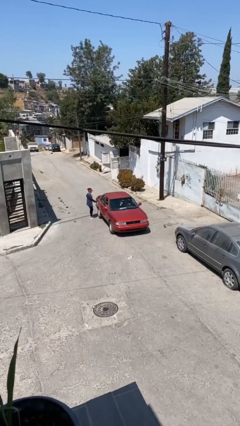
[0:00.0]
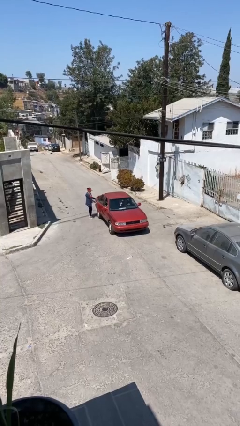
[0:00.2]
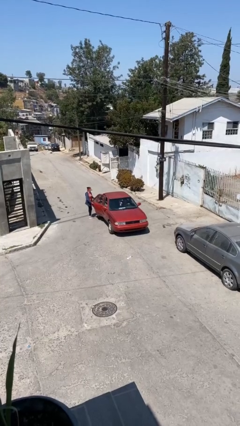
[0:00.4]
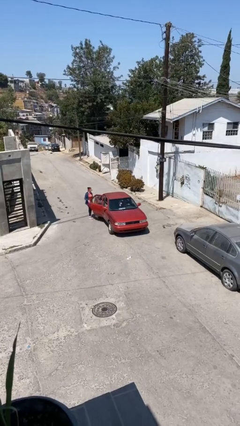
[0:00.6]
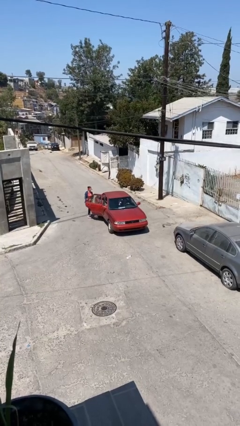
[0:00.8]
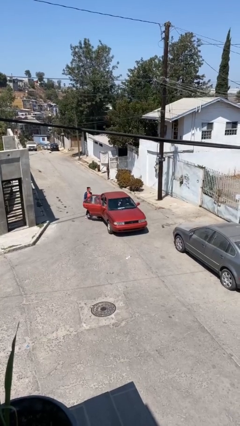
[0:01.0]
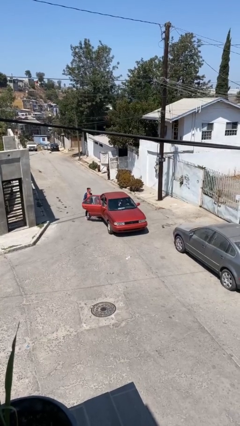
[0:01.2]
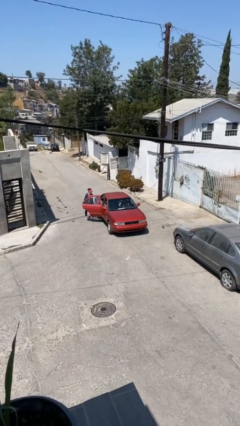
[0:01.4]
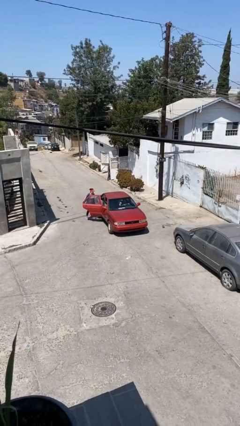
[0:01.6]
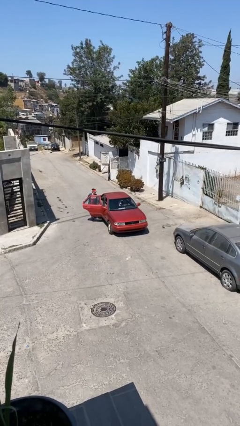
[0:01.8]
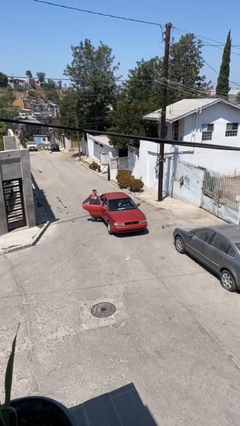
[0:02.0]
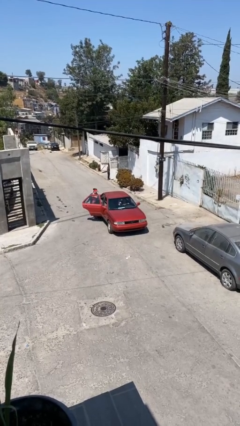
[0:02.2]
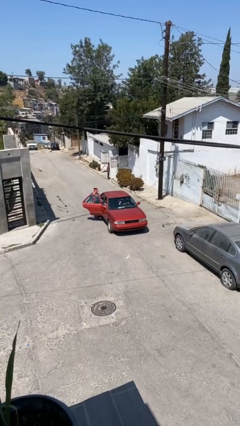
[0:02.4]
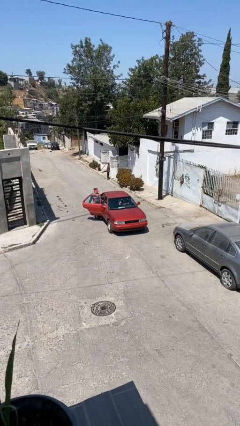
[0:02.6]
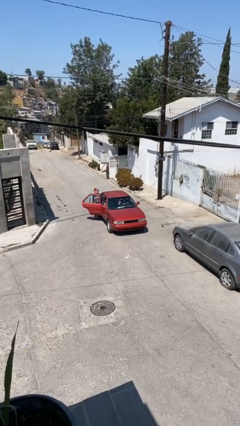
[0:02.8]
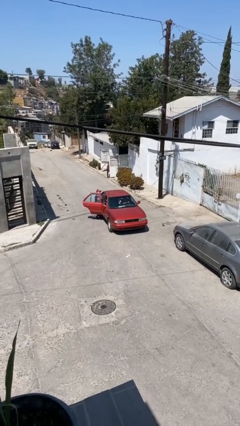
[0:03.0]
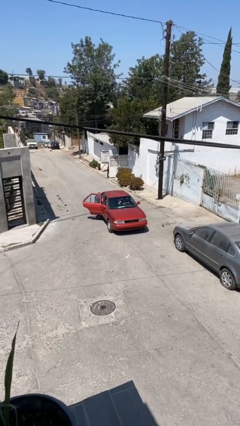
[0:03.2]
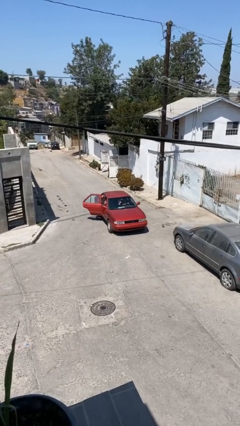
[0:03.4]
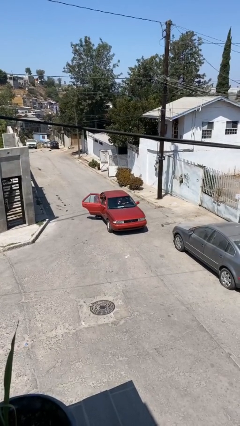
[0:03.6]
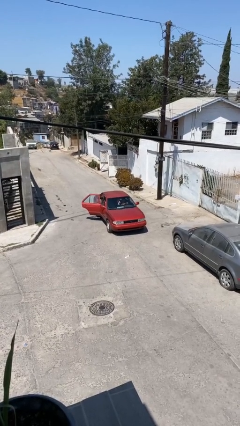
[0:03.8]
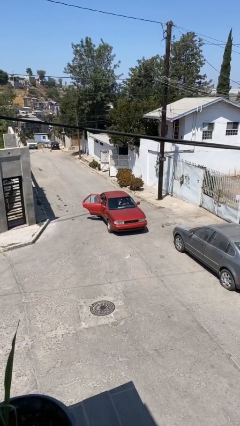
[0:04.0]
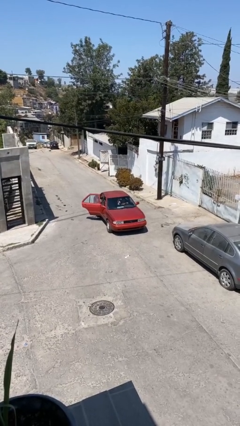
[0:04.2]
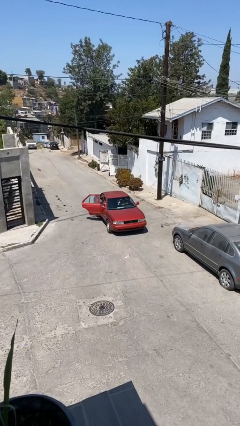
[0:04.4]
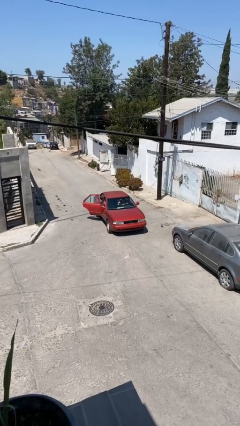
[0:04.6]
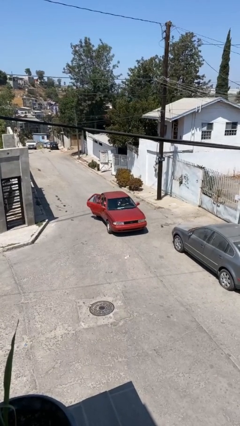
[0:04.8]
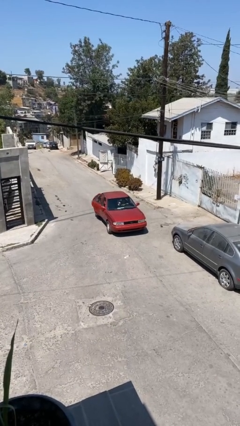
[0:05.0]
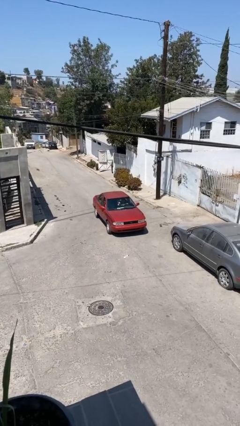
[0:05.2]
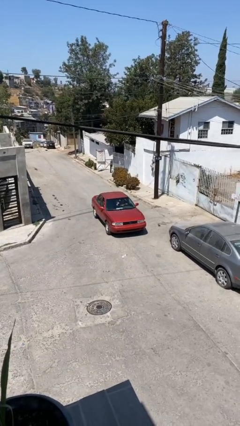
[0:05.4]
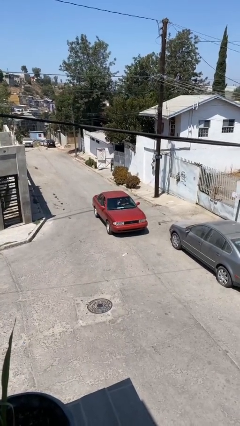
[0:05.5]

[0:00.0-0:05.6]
car picks up person

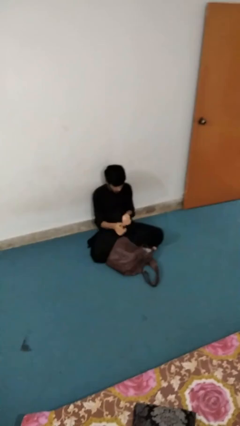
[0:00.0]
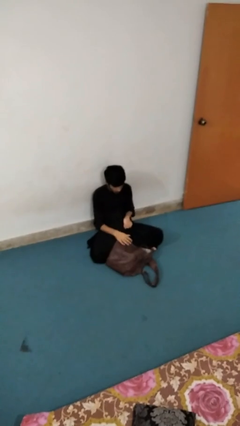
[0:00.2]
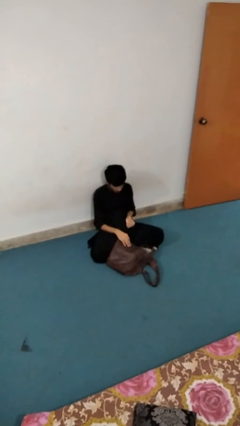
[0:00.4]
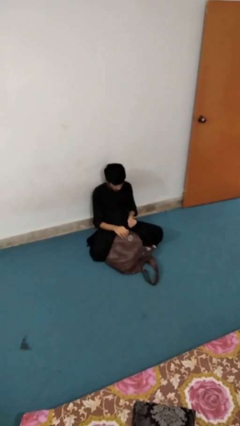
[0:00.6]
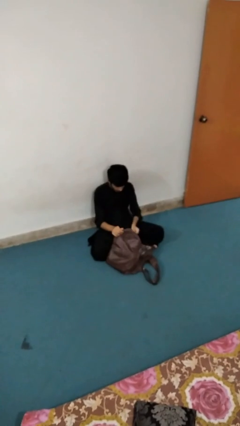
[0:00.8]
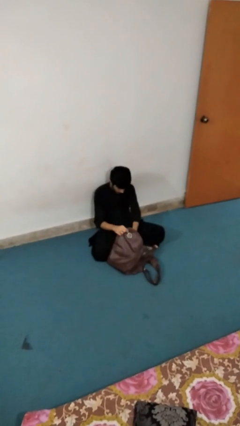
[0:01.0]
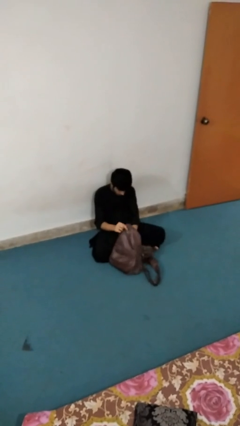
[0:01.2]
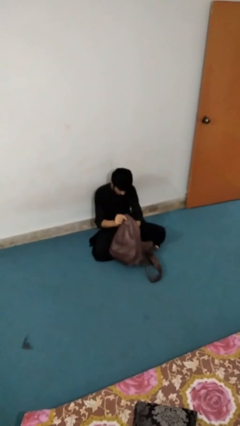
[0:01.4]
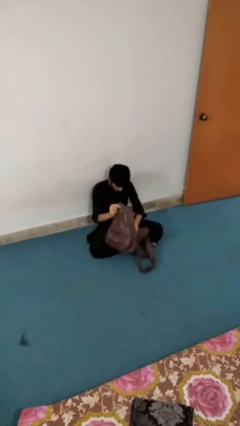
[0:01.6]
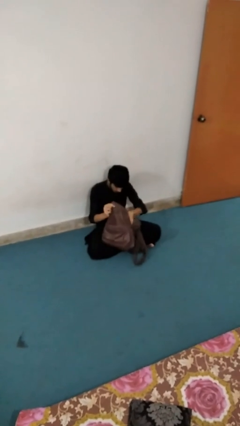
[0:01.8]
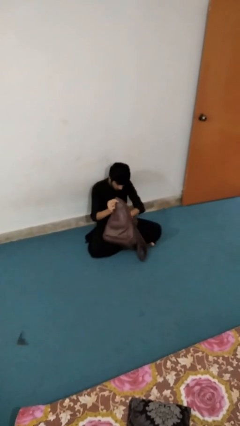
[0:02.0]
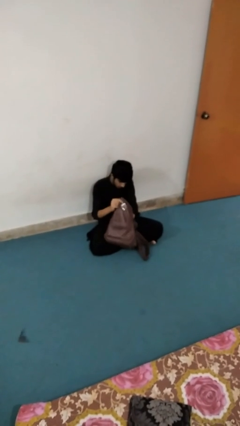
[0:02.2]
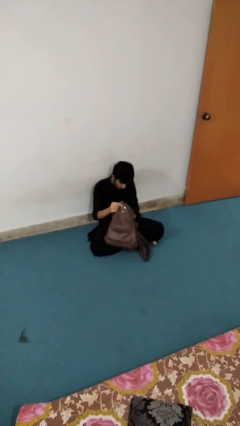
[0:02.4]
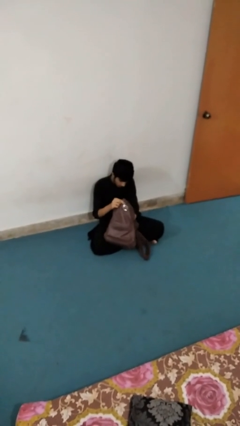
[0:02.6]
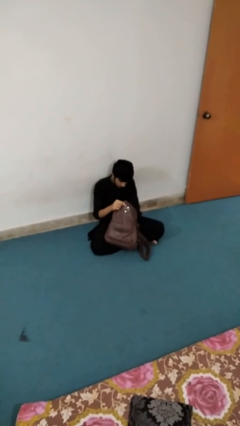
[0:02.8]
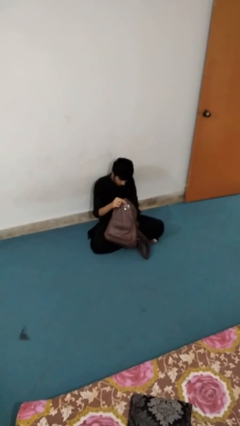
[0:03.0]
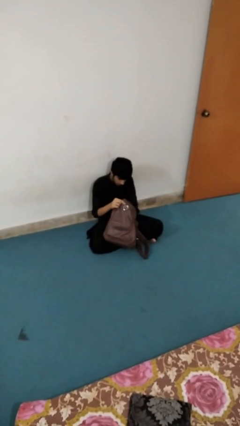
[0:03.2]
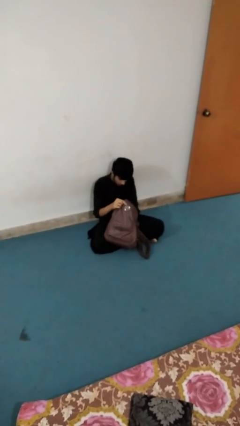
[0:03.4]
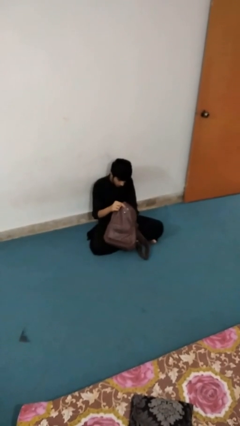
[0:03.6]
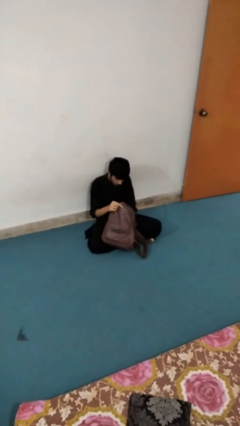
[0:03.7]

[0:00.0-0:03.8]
person searches in bag

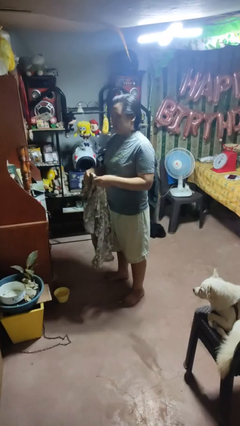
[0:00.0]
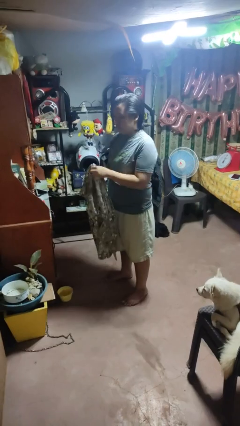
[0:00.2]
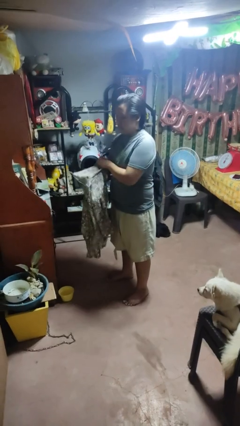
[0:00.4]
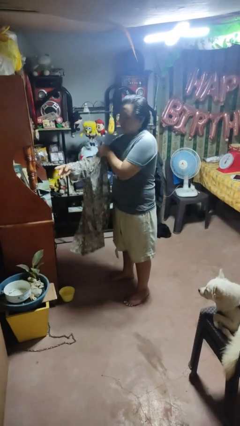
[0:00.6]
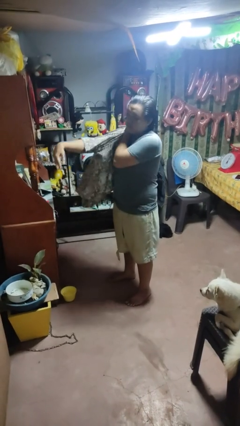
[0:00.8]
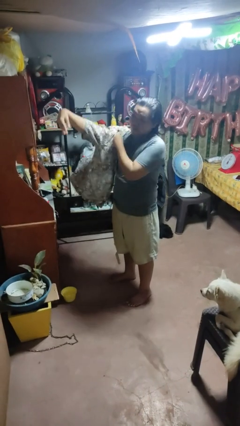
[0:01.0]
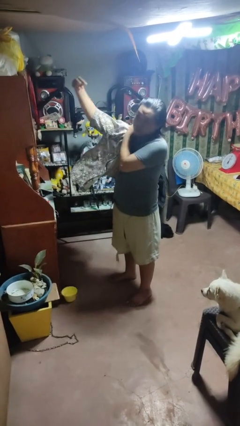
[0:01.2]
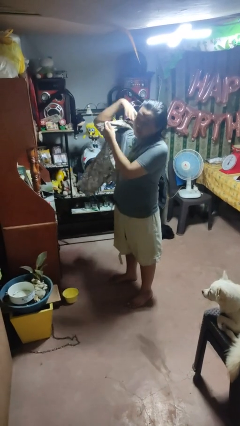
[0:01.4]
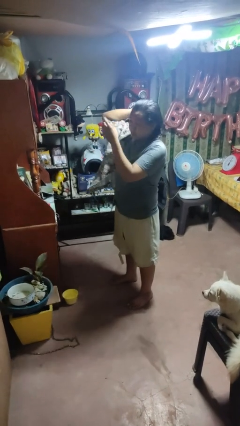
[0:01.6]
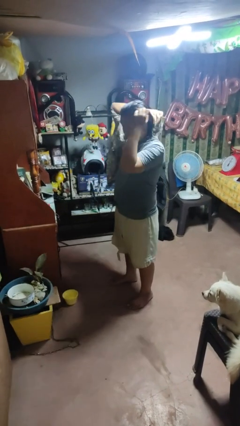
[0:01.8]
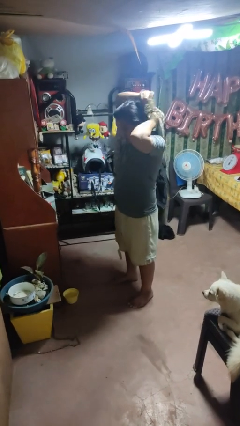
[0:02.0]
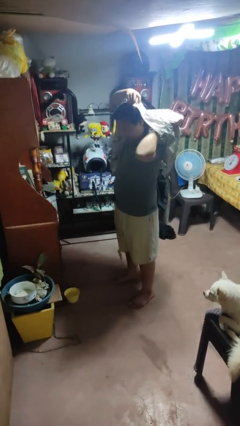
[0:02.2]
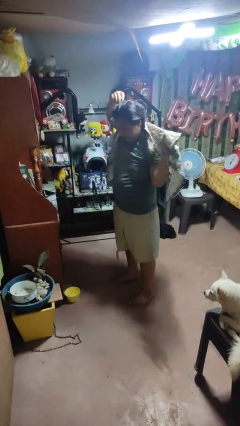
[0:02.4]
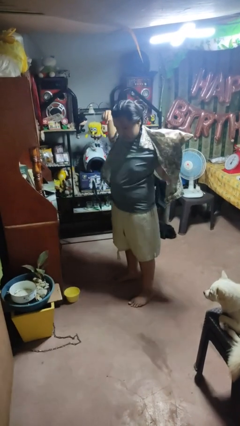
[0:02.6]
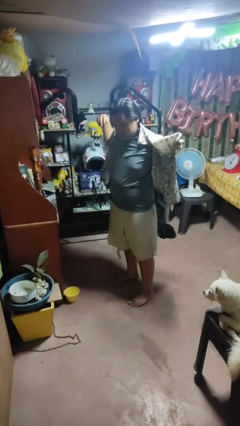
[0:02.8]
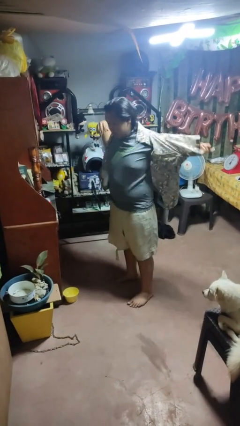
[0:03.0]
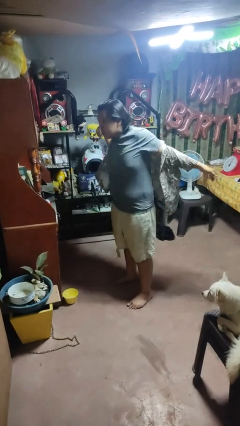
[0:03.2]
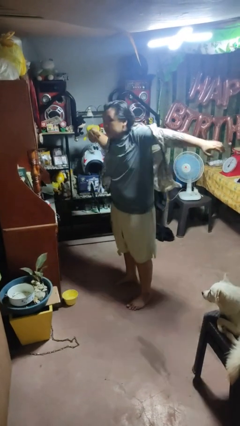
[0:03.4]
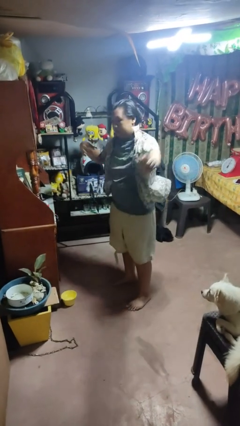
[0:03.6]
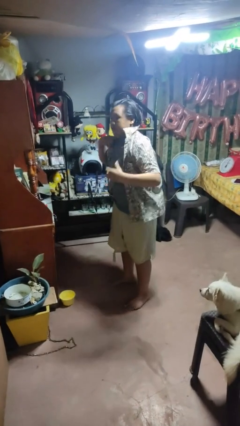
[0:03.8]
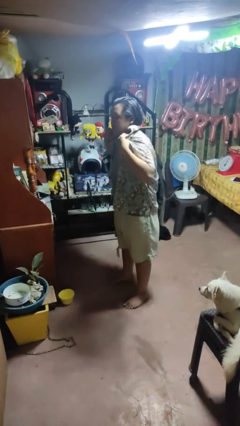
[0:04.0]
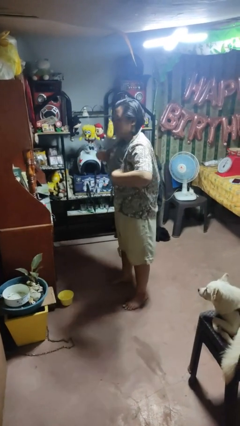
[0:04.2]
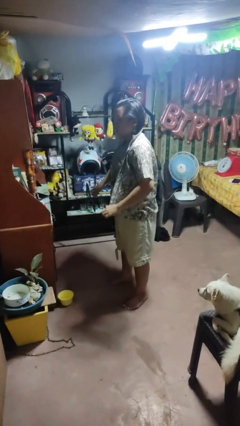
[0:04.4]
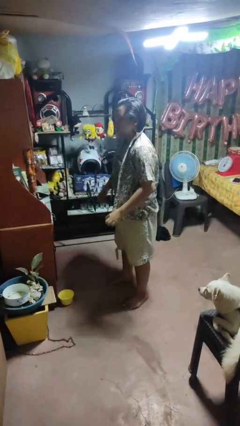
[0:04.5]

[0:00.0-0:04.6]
person puts on shirt

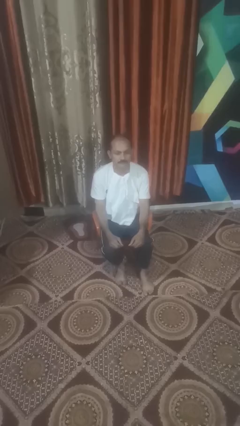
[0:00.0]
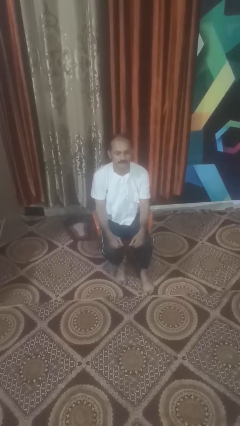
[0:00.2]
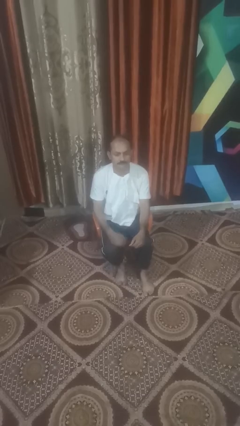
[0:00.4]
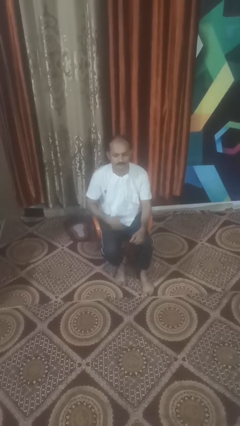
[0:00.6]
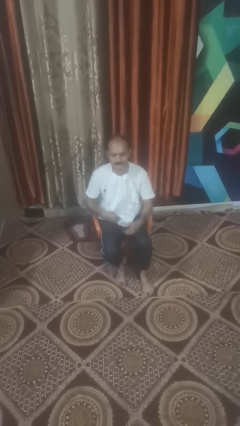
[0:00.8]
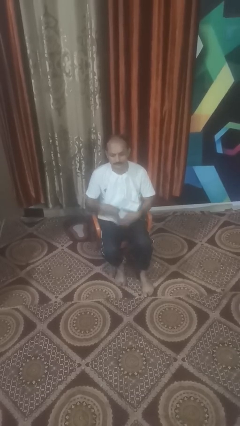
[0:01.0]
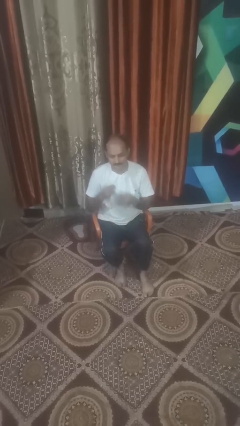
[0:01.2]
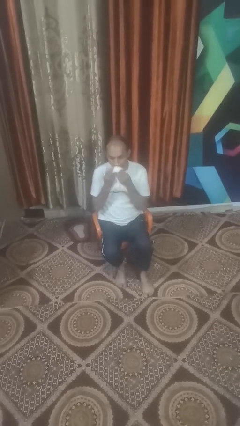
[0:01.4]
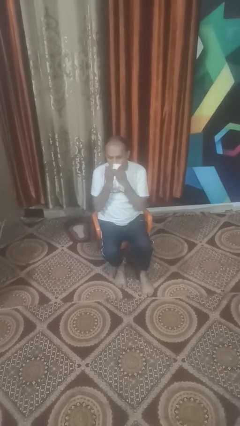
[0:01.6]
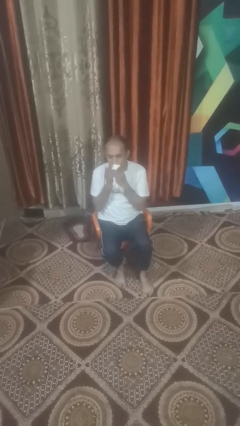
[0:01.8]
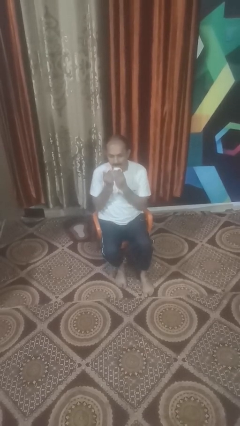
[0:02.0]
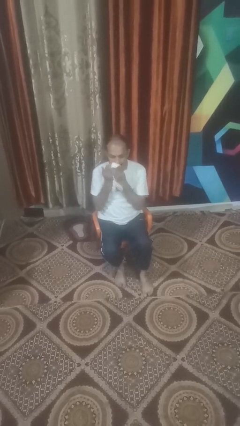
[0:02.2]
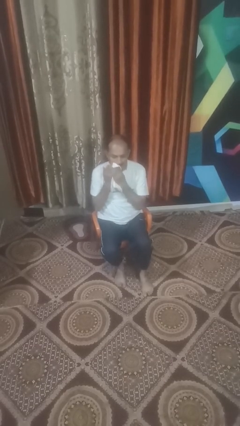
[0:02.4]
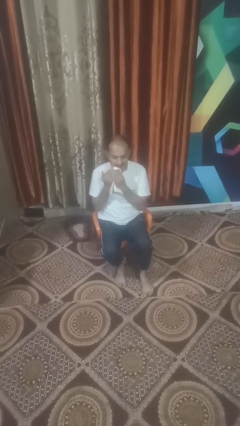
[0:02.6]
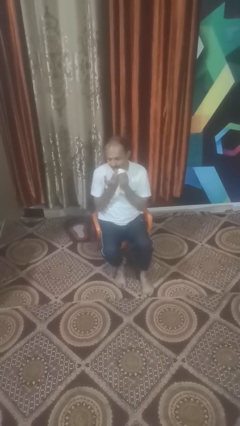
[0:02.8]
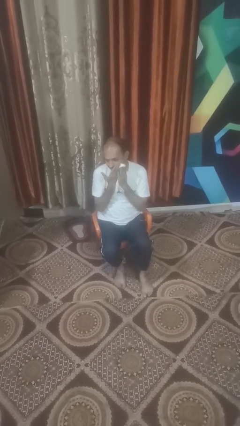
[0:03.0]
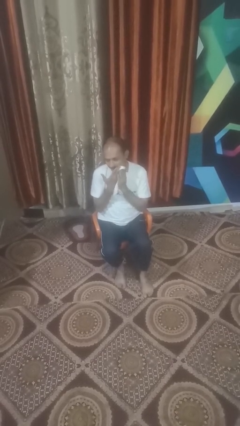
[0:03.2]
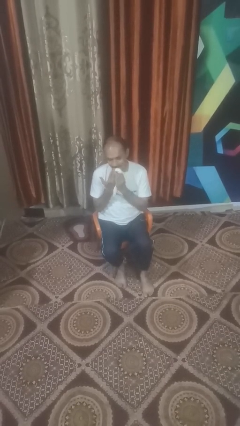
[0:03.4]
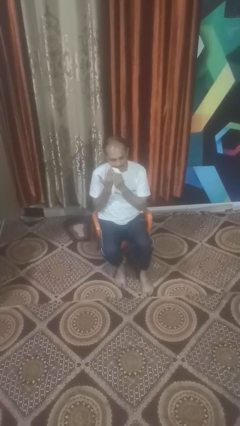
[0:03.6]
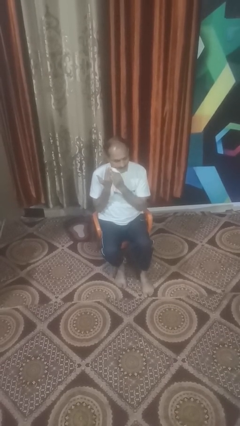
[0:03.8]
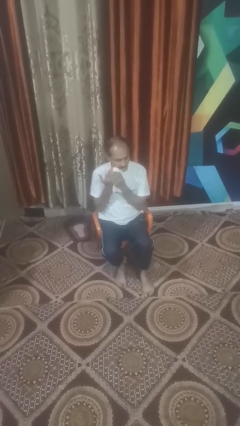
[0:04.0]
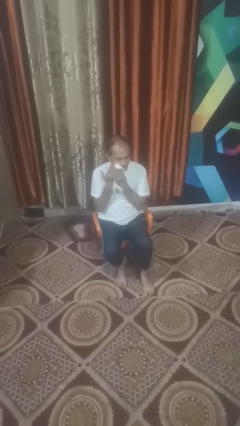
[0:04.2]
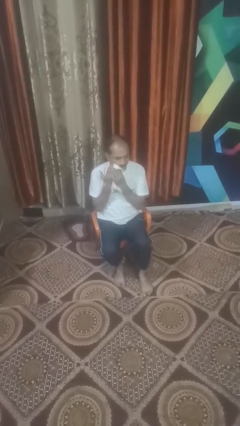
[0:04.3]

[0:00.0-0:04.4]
person wipes mouth with napkin
